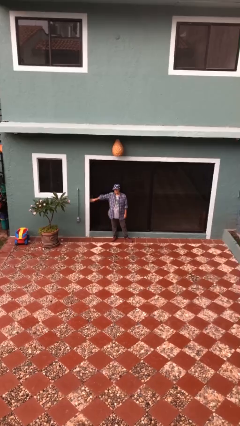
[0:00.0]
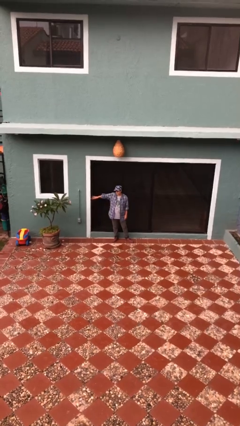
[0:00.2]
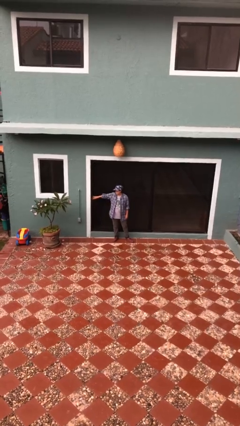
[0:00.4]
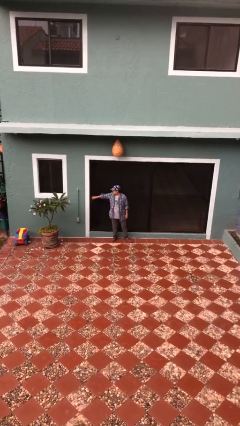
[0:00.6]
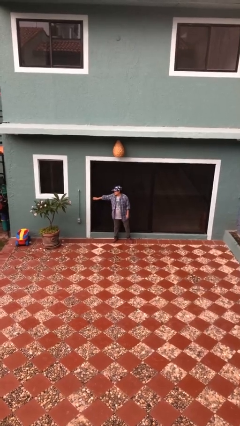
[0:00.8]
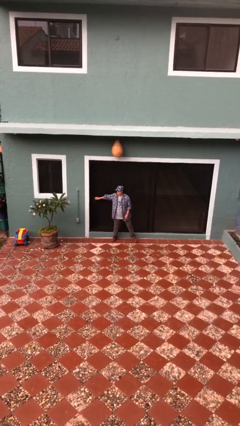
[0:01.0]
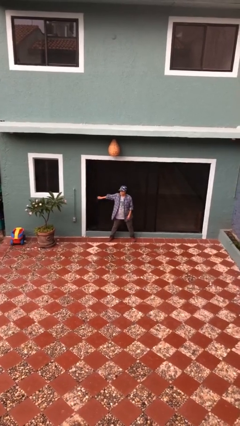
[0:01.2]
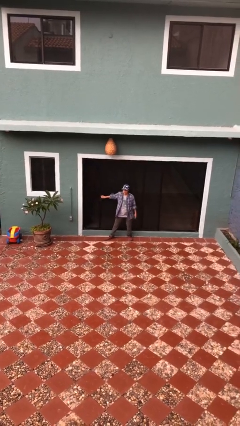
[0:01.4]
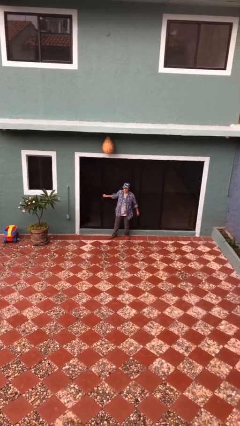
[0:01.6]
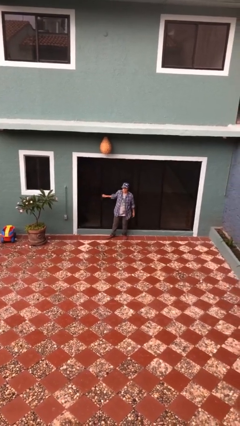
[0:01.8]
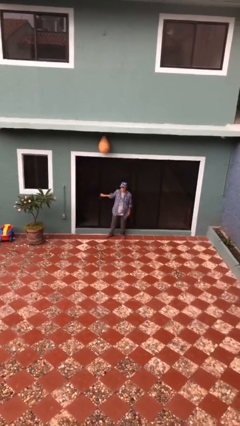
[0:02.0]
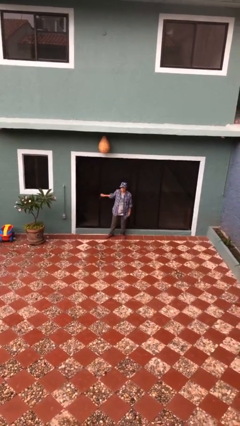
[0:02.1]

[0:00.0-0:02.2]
person opens sliding door

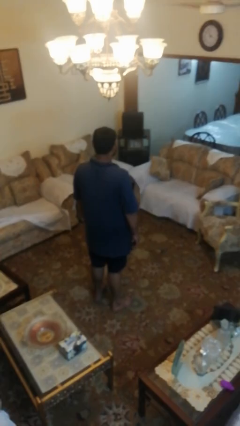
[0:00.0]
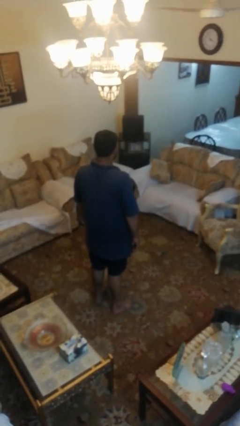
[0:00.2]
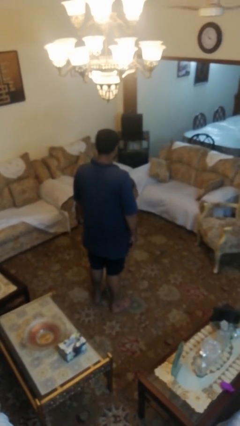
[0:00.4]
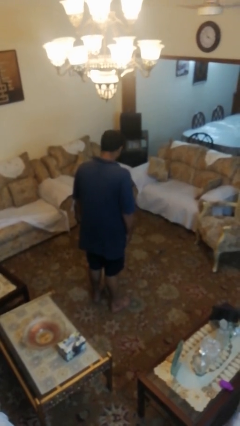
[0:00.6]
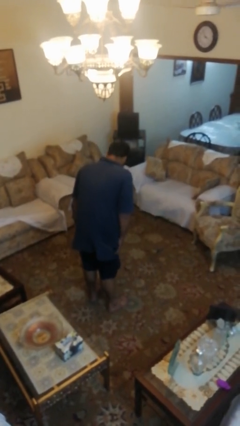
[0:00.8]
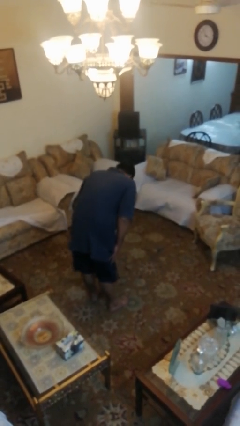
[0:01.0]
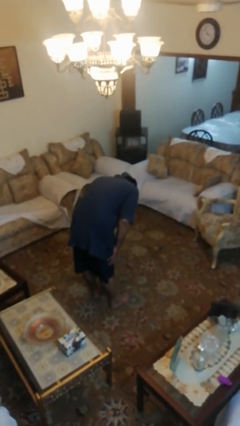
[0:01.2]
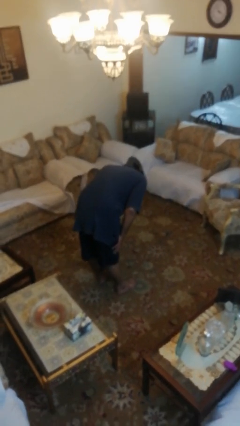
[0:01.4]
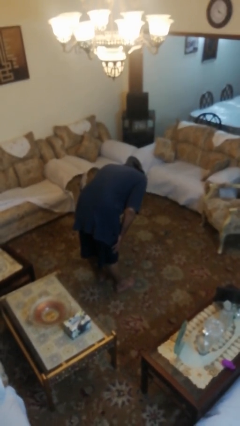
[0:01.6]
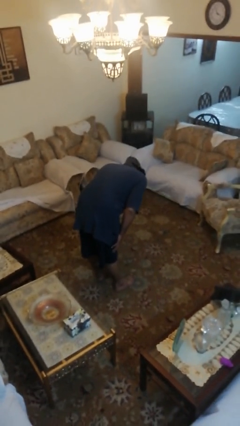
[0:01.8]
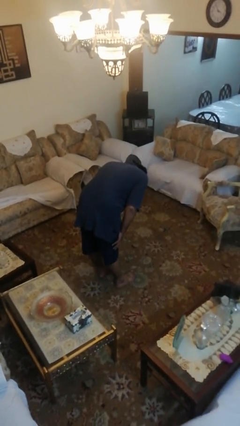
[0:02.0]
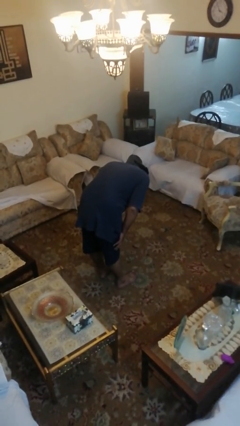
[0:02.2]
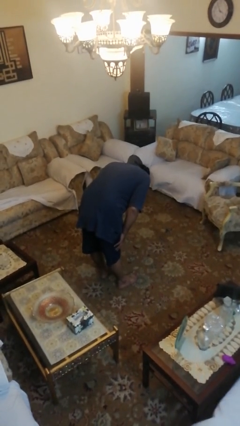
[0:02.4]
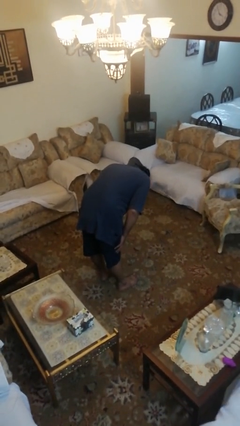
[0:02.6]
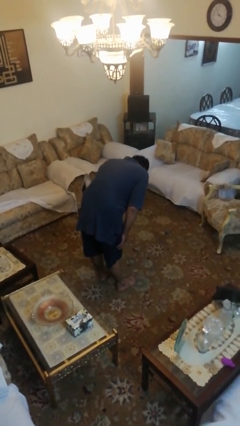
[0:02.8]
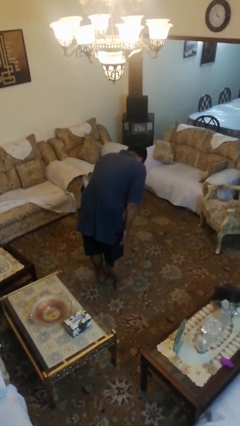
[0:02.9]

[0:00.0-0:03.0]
person bows

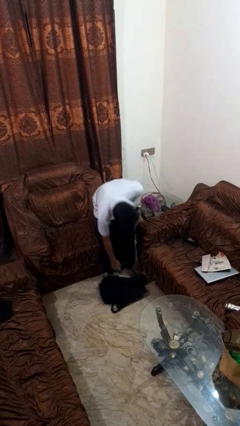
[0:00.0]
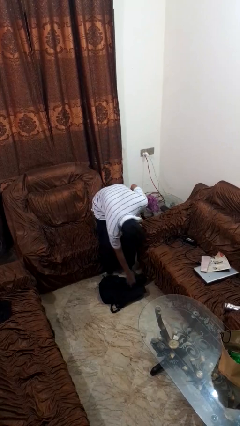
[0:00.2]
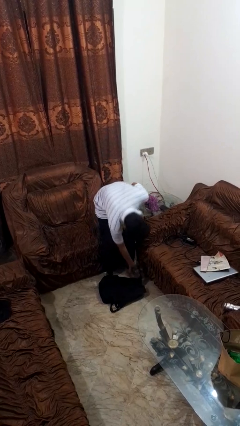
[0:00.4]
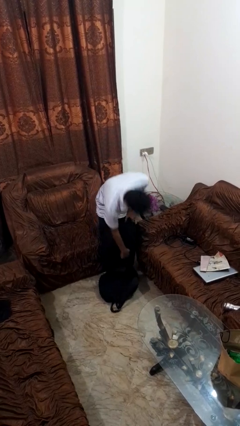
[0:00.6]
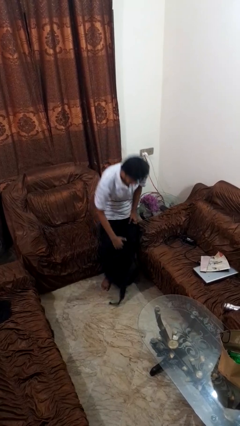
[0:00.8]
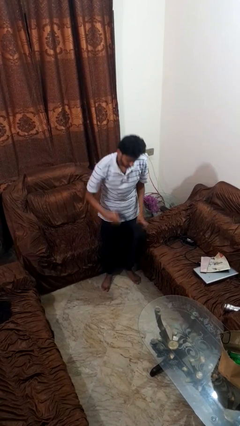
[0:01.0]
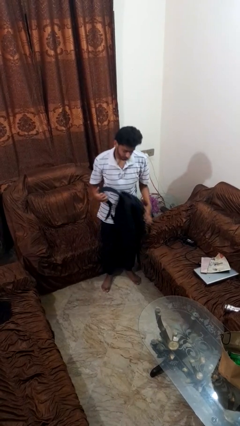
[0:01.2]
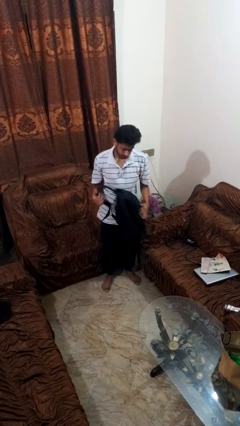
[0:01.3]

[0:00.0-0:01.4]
person picks up object from floor

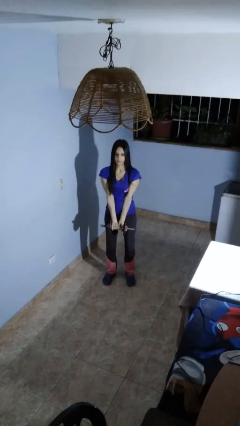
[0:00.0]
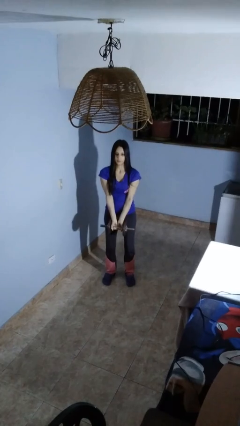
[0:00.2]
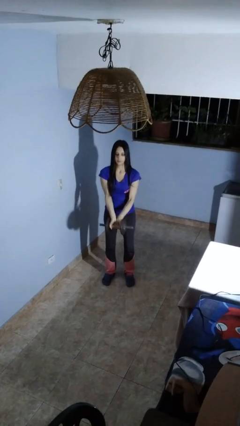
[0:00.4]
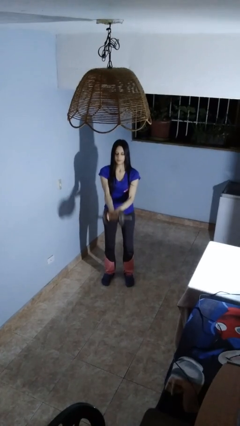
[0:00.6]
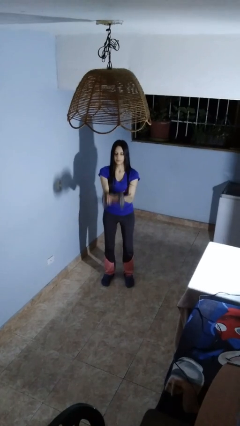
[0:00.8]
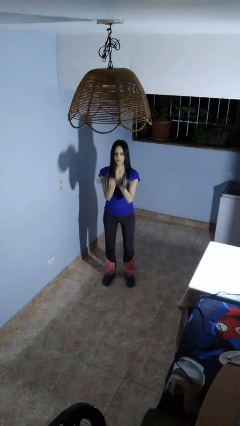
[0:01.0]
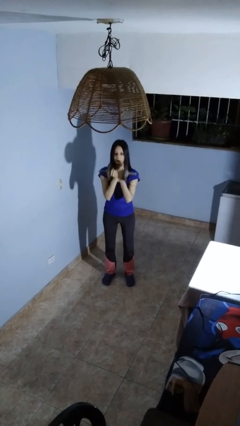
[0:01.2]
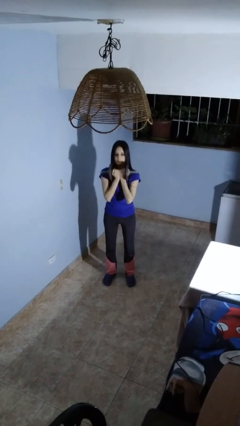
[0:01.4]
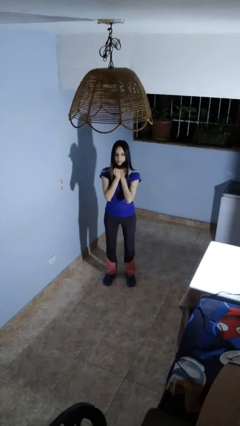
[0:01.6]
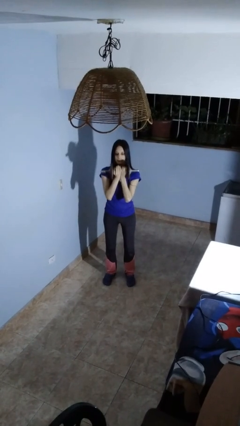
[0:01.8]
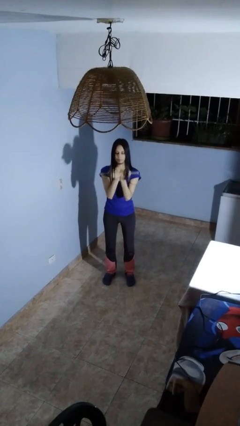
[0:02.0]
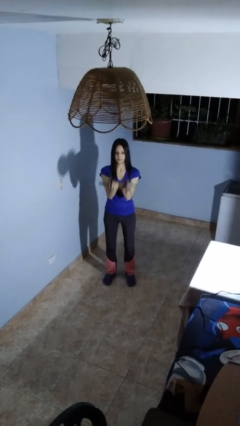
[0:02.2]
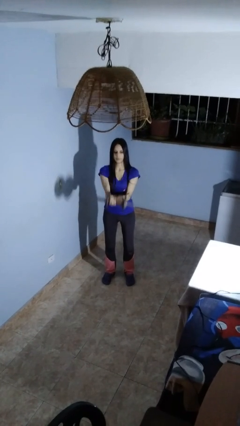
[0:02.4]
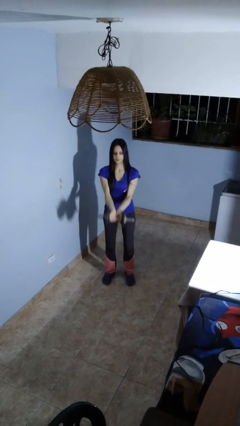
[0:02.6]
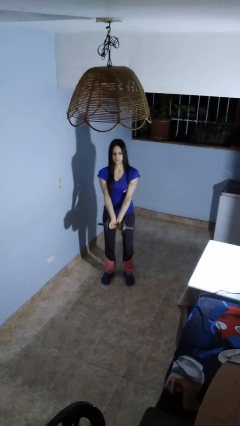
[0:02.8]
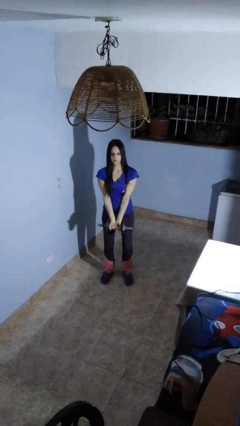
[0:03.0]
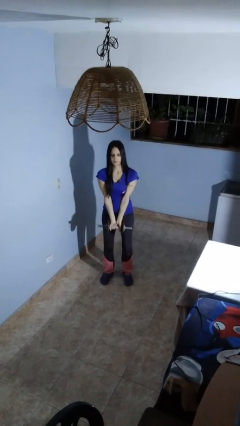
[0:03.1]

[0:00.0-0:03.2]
person lifts dumbbells

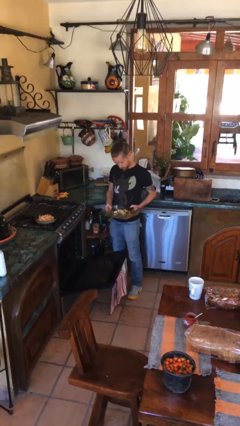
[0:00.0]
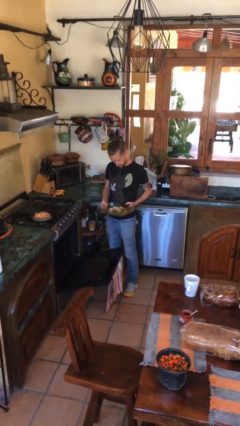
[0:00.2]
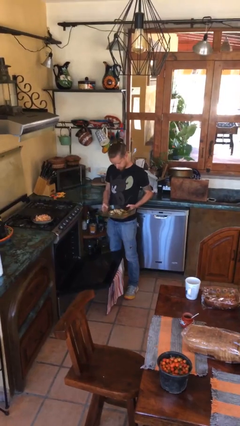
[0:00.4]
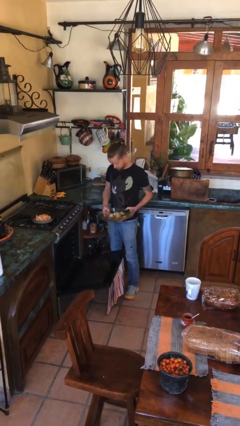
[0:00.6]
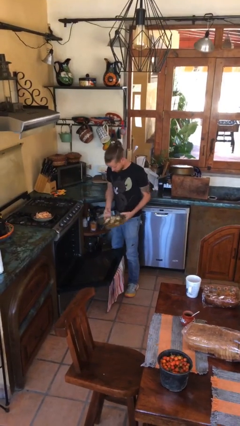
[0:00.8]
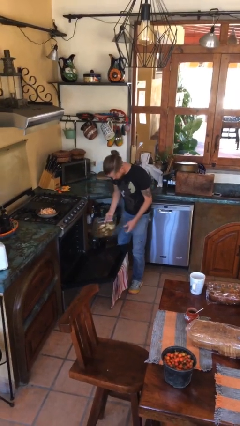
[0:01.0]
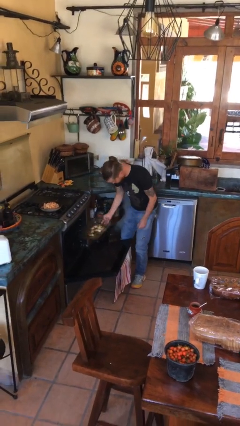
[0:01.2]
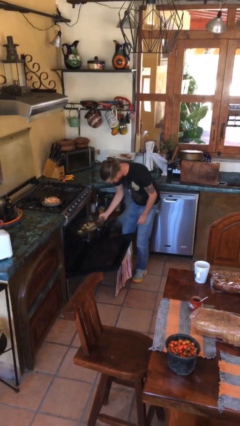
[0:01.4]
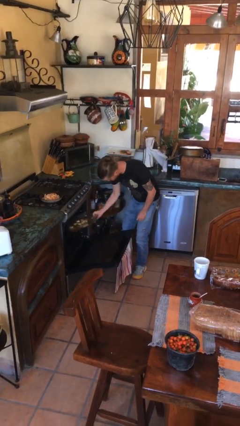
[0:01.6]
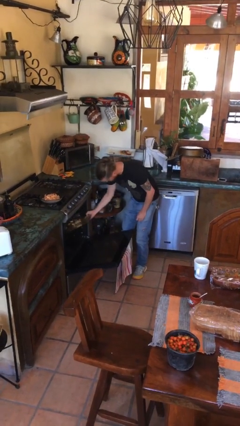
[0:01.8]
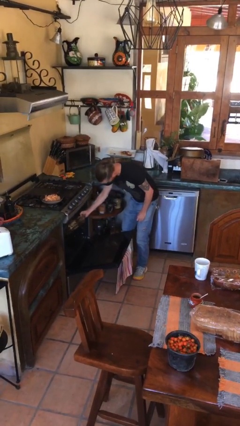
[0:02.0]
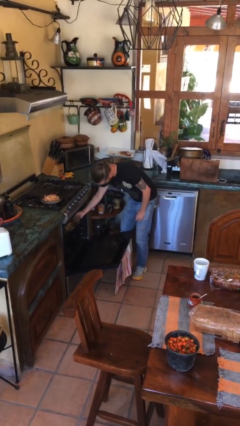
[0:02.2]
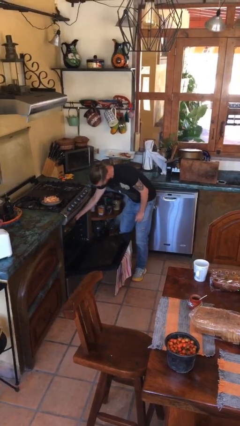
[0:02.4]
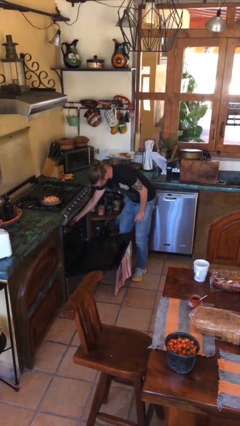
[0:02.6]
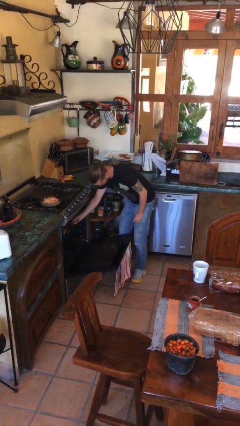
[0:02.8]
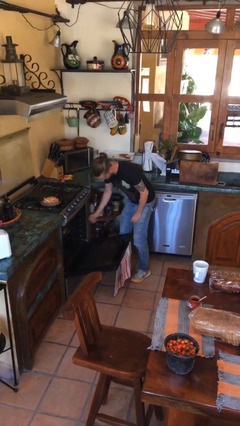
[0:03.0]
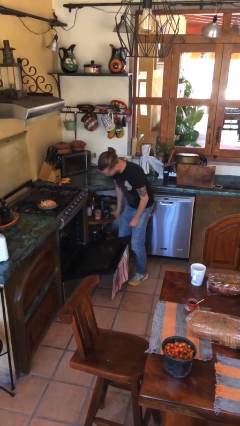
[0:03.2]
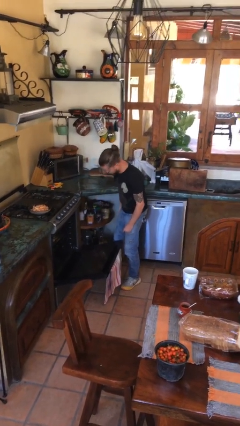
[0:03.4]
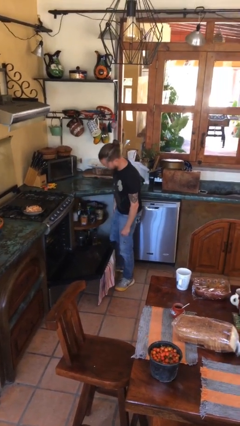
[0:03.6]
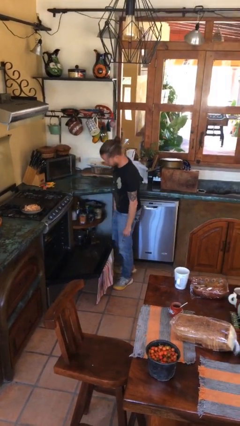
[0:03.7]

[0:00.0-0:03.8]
person puts object into oven

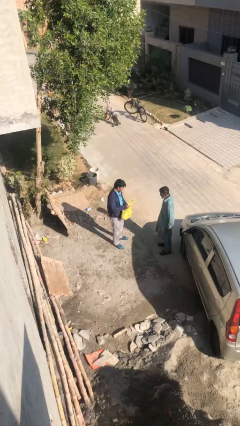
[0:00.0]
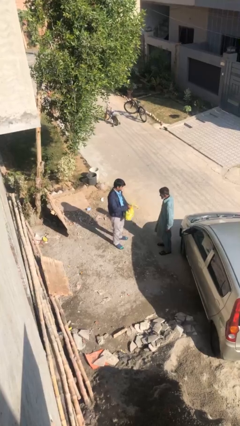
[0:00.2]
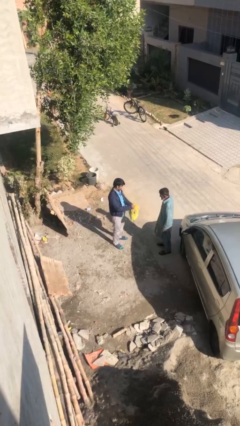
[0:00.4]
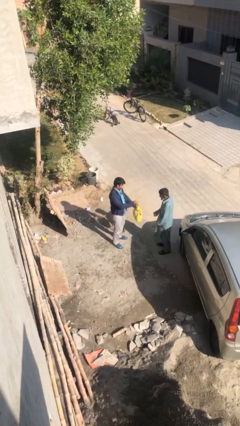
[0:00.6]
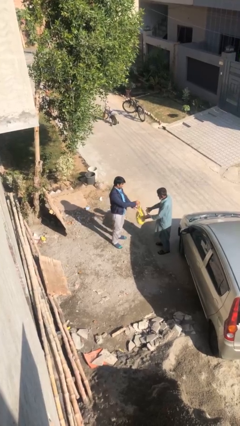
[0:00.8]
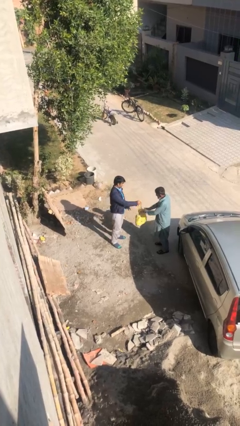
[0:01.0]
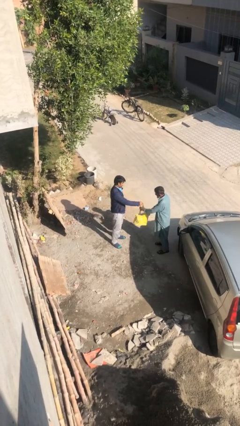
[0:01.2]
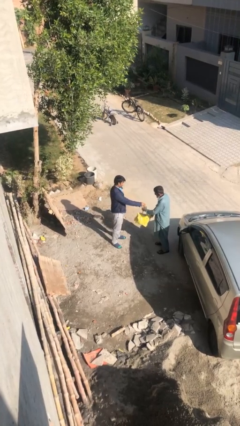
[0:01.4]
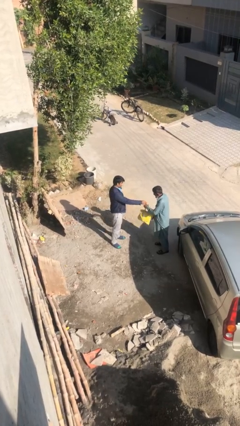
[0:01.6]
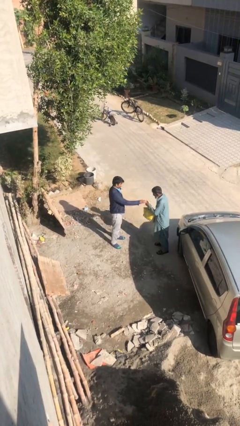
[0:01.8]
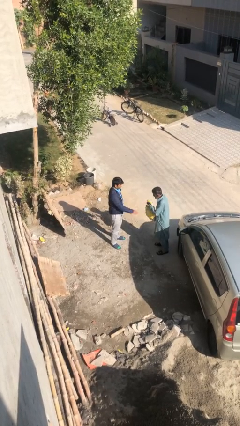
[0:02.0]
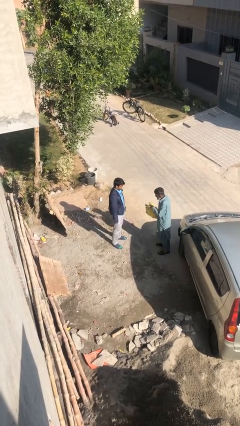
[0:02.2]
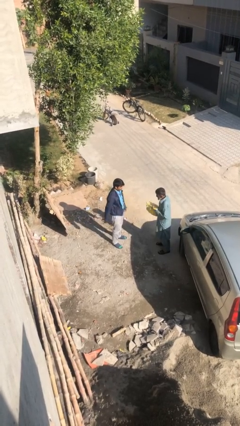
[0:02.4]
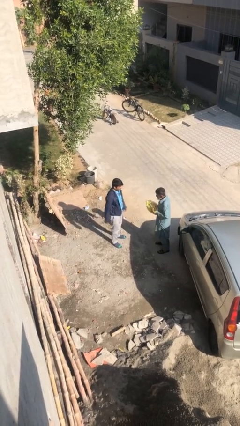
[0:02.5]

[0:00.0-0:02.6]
person transfers object to person

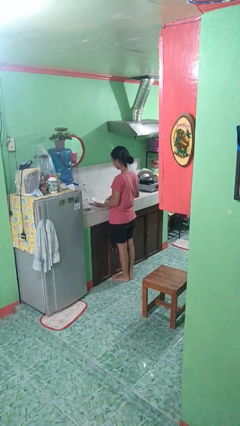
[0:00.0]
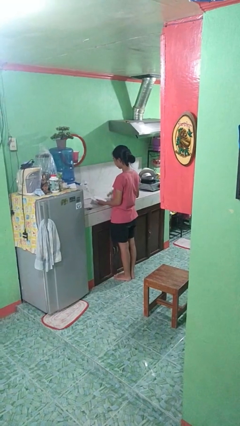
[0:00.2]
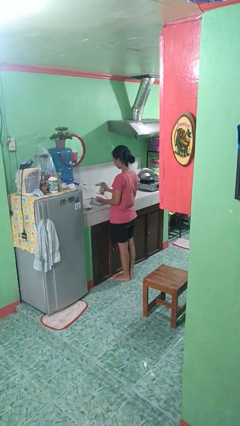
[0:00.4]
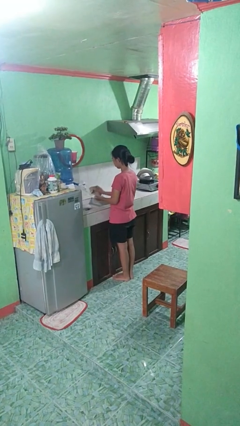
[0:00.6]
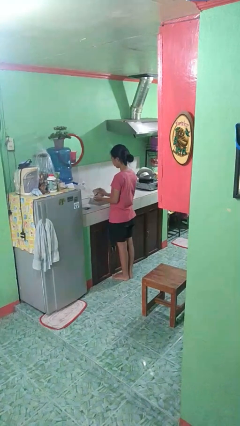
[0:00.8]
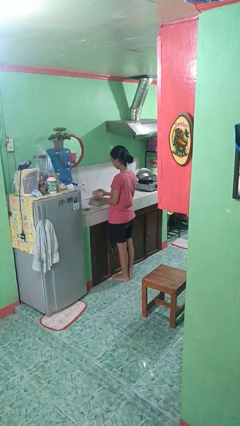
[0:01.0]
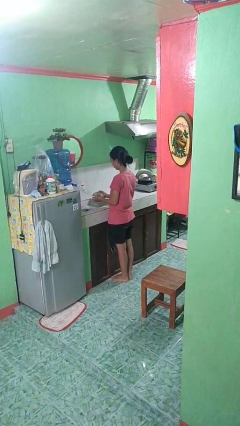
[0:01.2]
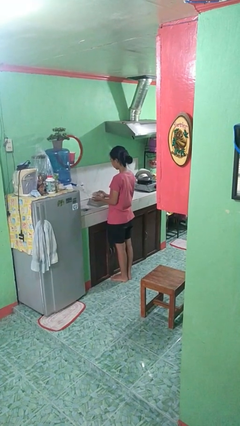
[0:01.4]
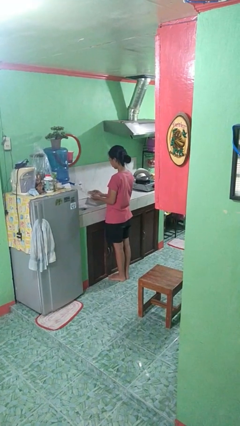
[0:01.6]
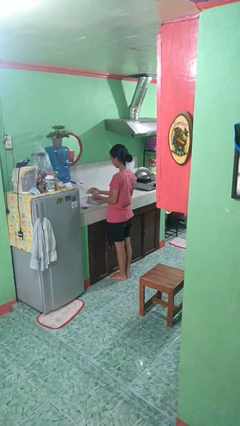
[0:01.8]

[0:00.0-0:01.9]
person dries dish
